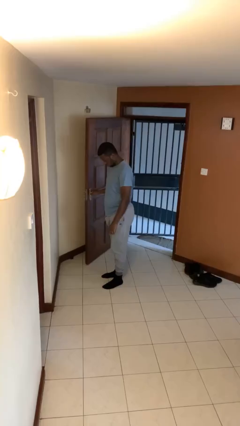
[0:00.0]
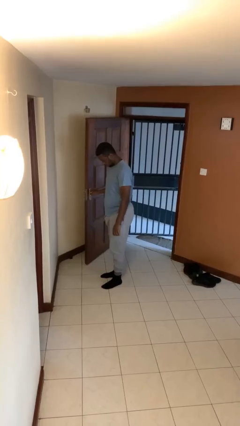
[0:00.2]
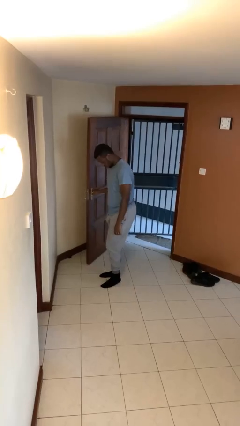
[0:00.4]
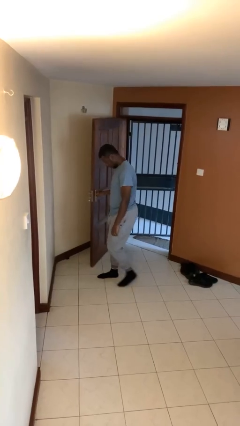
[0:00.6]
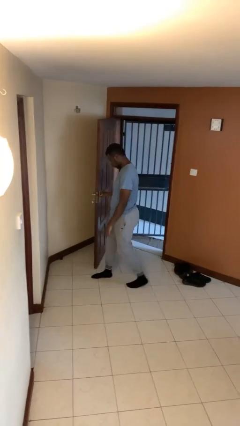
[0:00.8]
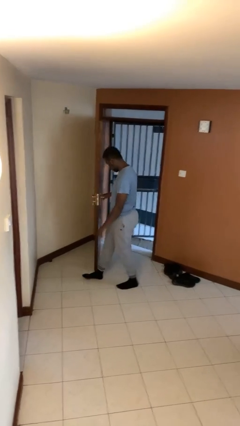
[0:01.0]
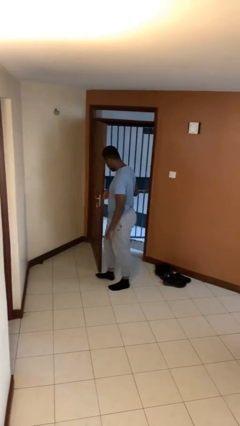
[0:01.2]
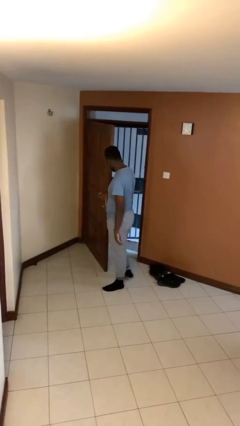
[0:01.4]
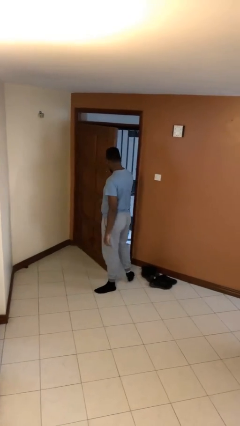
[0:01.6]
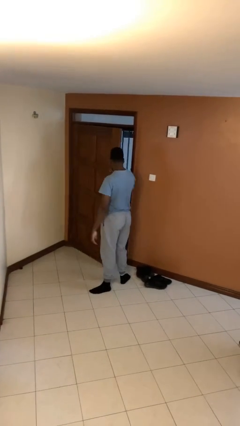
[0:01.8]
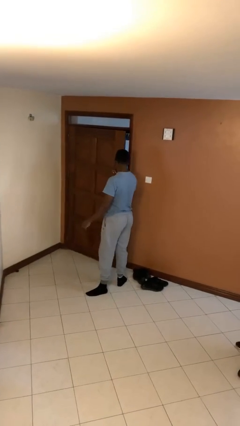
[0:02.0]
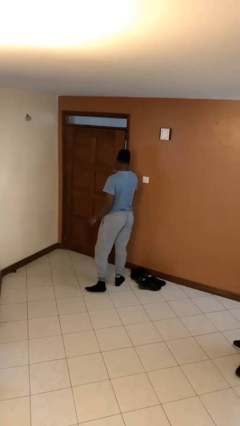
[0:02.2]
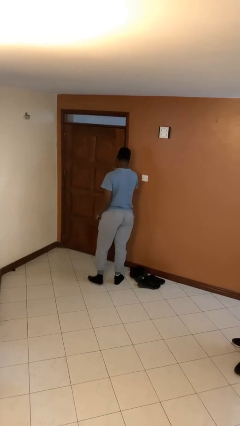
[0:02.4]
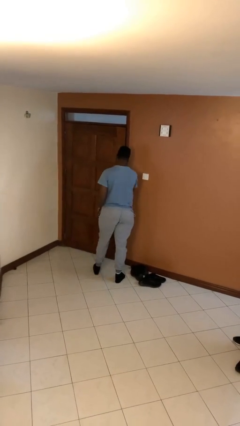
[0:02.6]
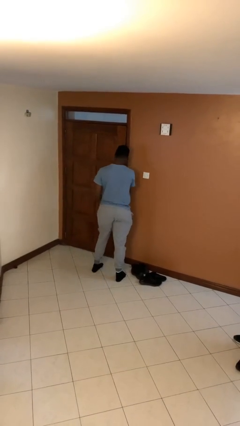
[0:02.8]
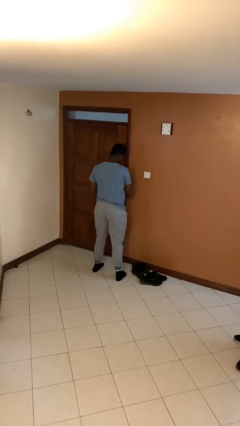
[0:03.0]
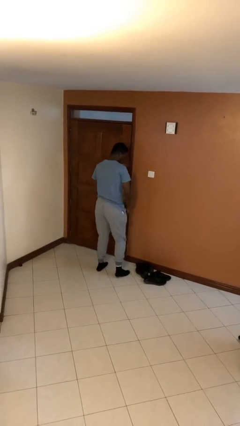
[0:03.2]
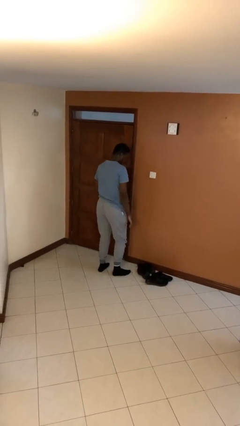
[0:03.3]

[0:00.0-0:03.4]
person closes facility door

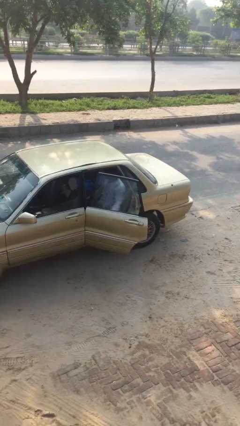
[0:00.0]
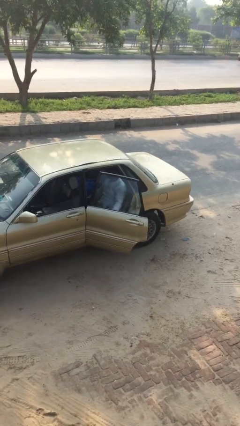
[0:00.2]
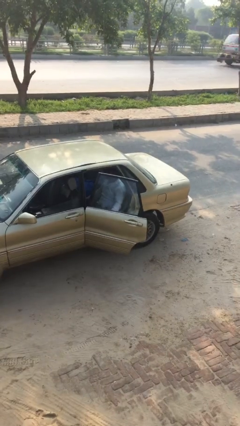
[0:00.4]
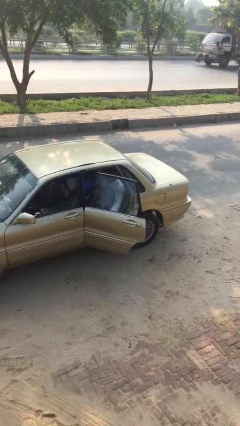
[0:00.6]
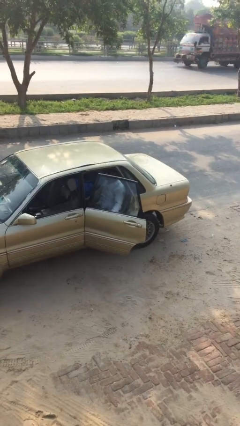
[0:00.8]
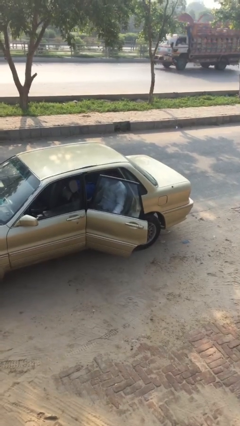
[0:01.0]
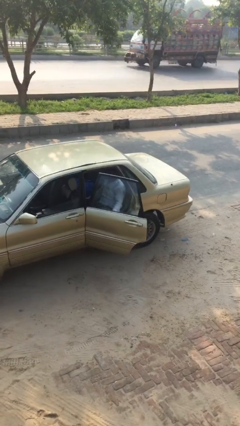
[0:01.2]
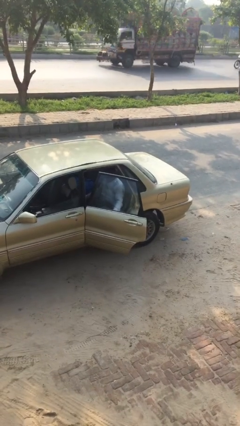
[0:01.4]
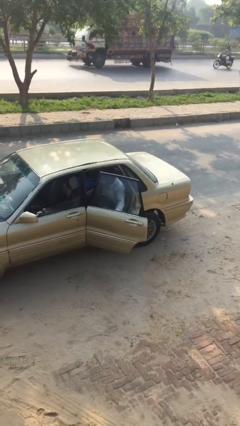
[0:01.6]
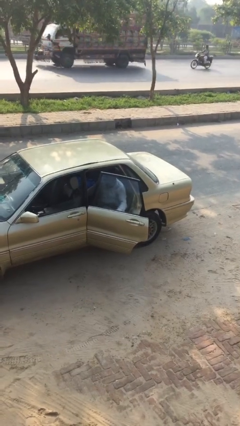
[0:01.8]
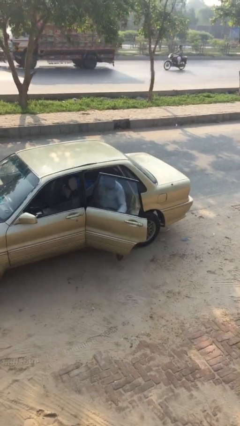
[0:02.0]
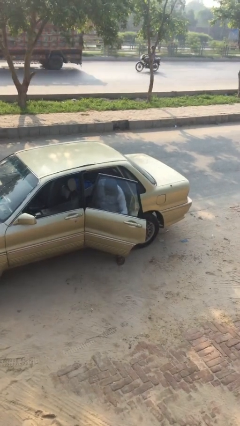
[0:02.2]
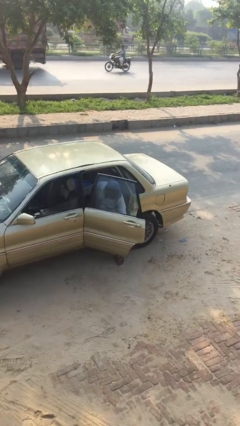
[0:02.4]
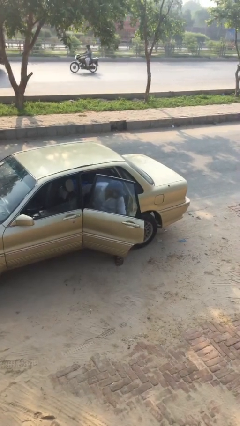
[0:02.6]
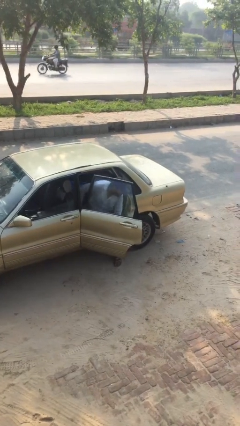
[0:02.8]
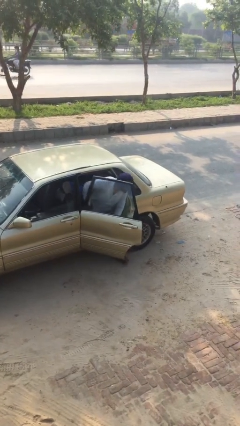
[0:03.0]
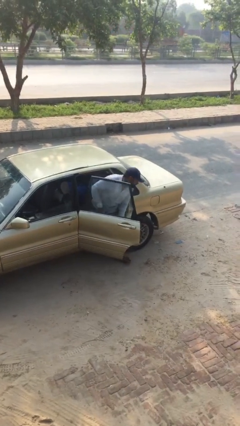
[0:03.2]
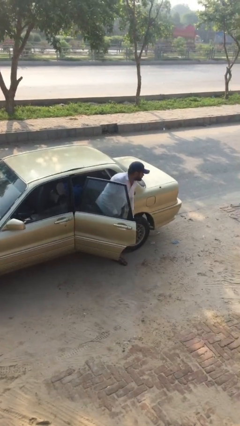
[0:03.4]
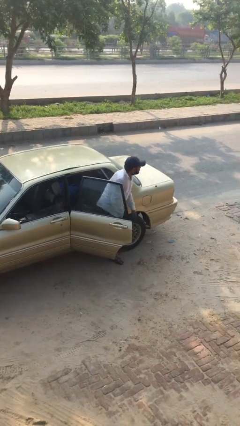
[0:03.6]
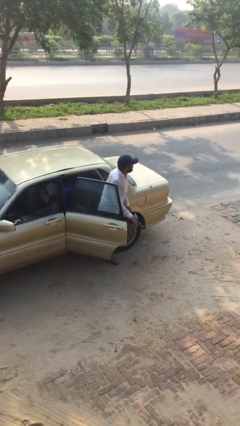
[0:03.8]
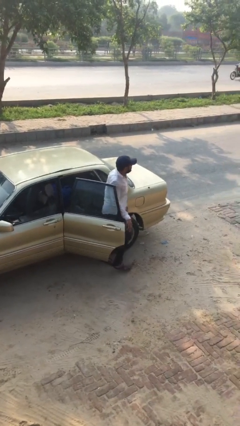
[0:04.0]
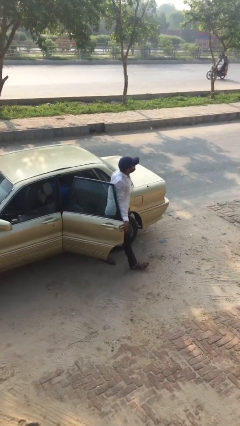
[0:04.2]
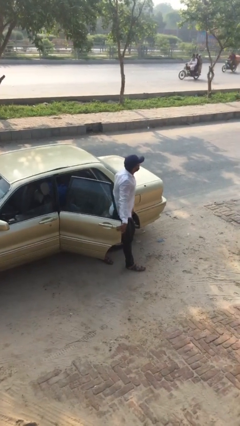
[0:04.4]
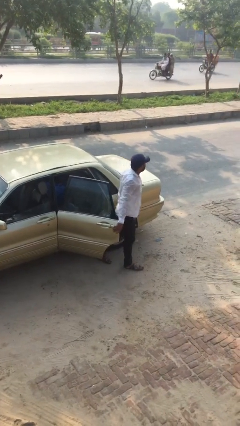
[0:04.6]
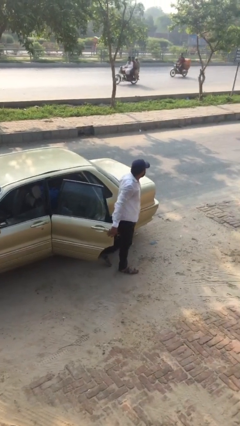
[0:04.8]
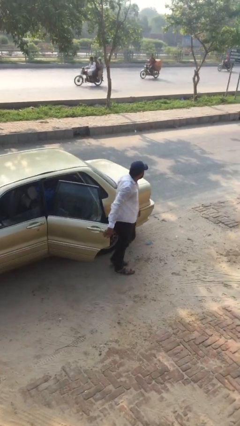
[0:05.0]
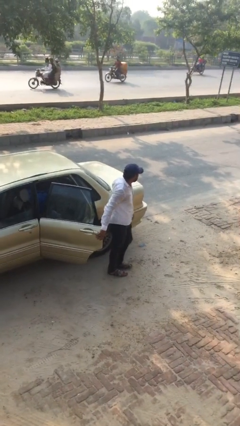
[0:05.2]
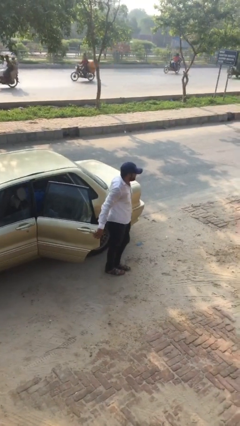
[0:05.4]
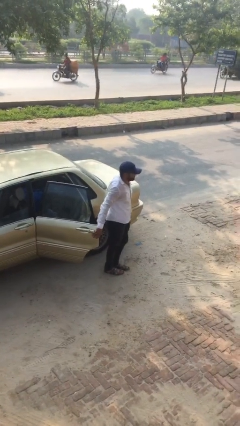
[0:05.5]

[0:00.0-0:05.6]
person exits car

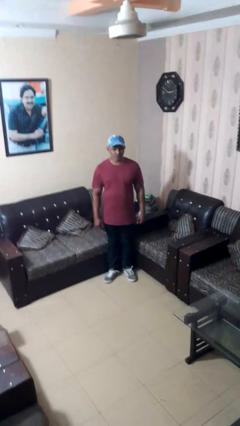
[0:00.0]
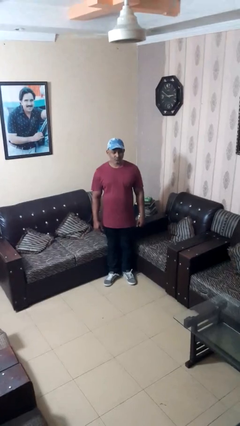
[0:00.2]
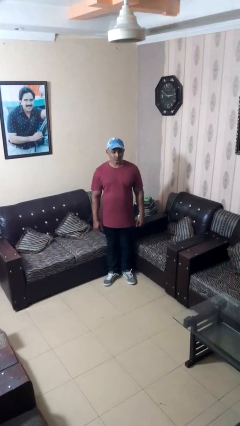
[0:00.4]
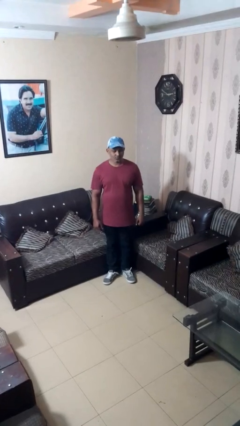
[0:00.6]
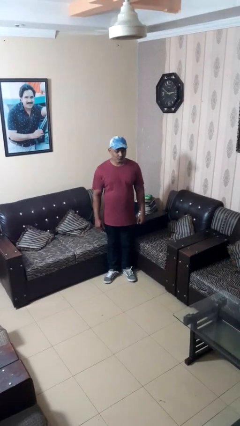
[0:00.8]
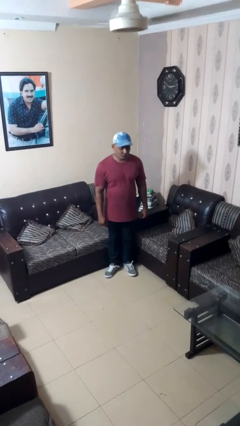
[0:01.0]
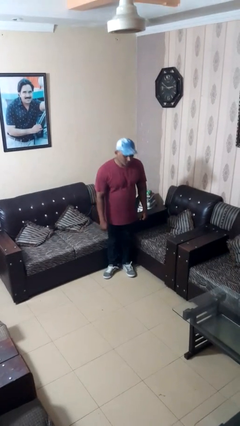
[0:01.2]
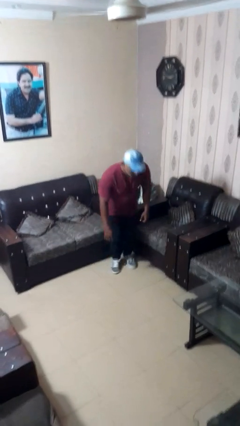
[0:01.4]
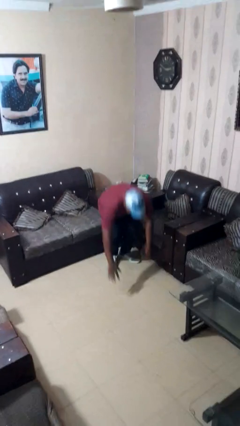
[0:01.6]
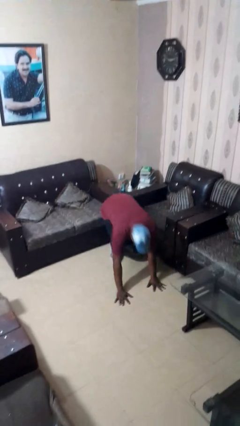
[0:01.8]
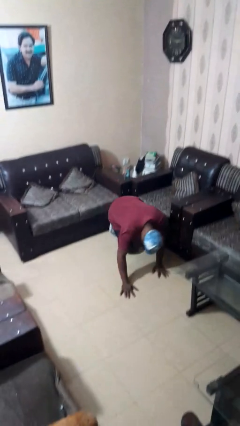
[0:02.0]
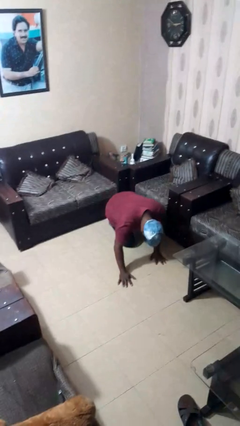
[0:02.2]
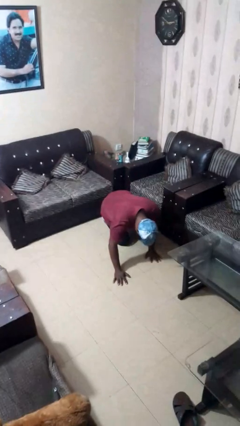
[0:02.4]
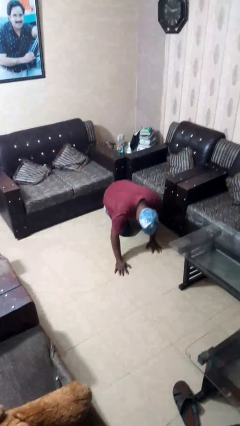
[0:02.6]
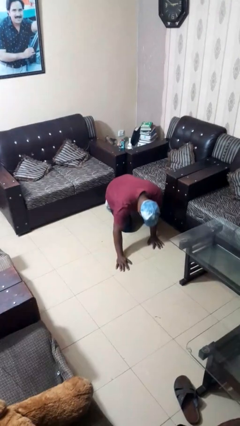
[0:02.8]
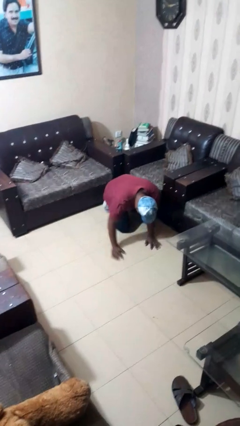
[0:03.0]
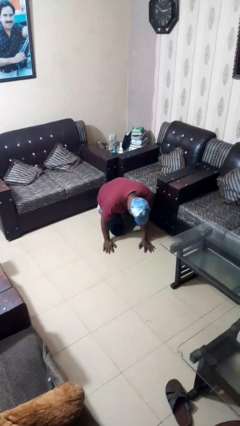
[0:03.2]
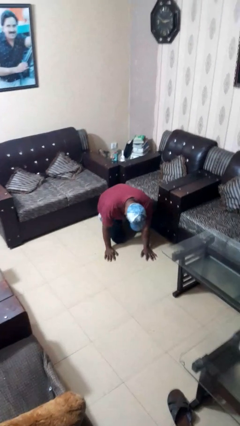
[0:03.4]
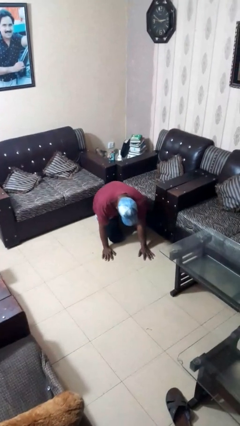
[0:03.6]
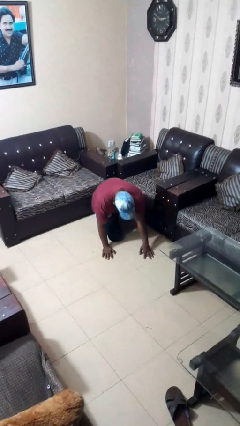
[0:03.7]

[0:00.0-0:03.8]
person falls while standing

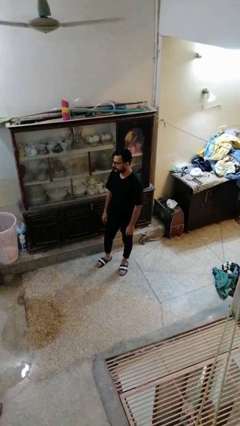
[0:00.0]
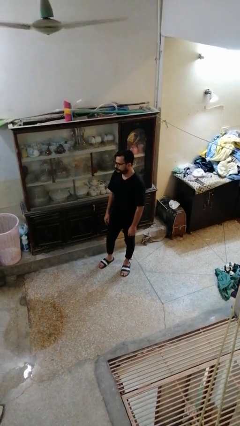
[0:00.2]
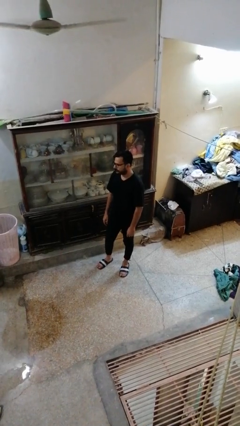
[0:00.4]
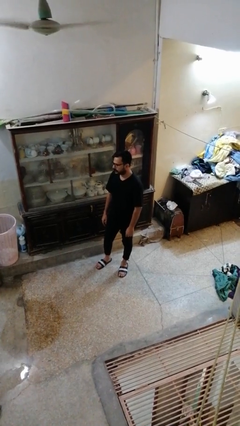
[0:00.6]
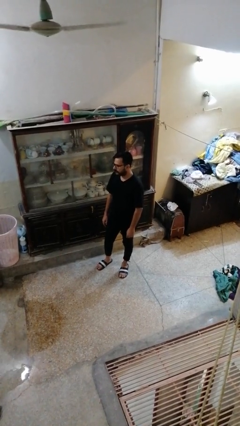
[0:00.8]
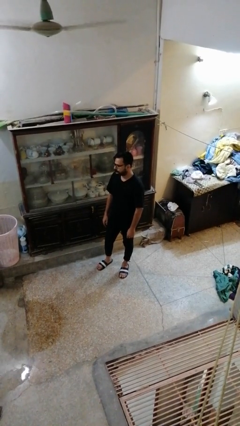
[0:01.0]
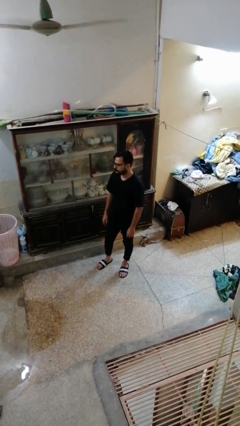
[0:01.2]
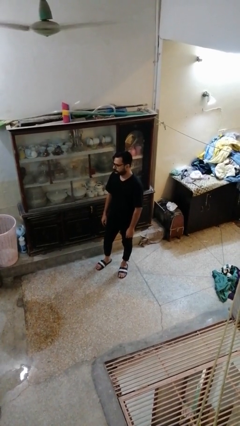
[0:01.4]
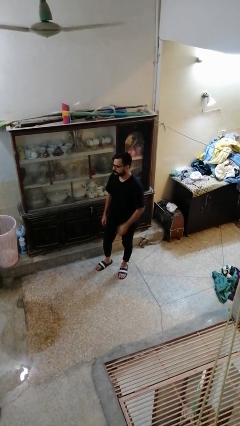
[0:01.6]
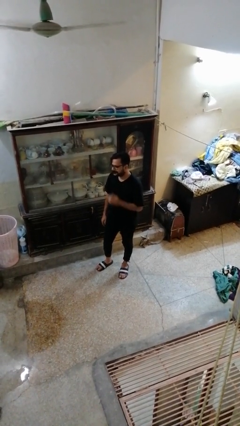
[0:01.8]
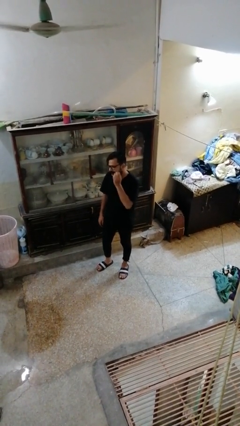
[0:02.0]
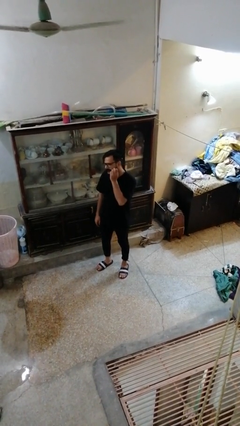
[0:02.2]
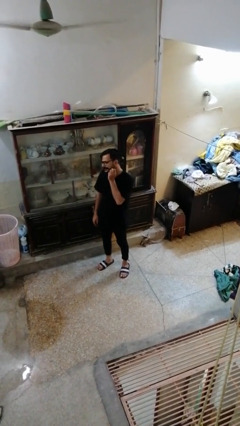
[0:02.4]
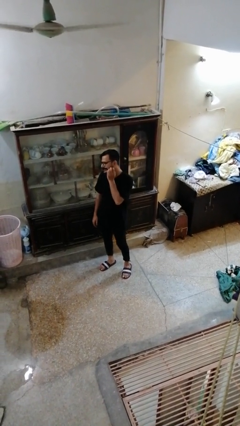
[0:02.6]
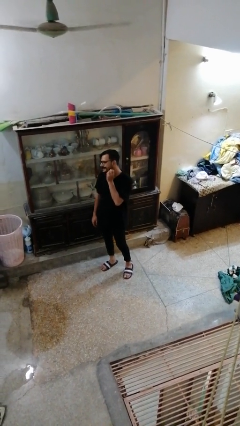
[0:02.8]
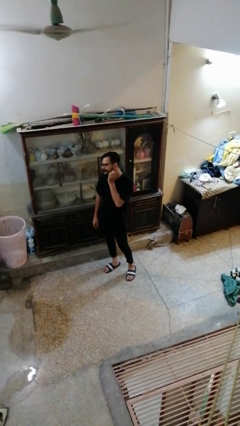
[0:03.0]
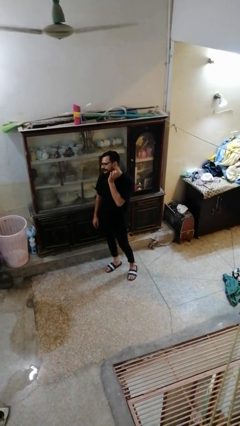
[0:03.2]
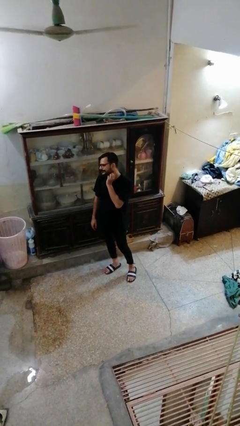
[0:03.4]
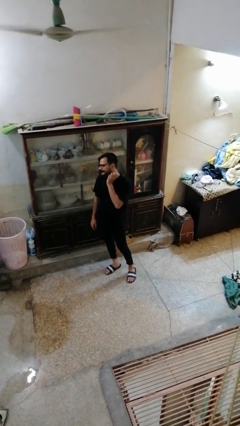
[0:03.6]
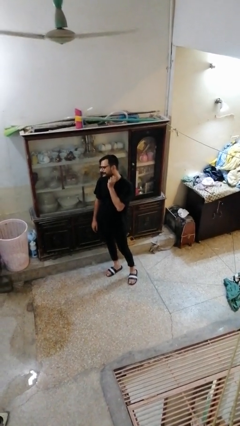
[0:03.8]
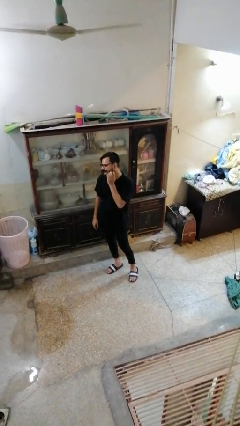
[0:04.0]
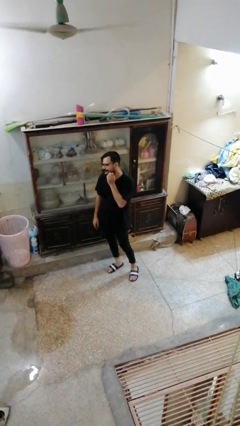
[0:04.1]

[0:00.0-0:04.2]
person scratches face

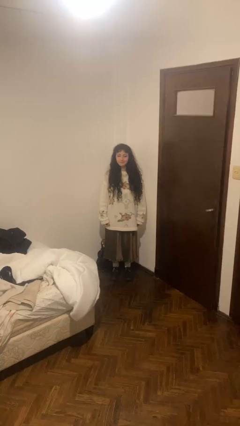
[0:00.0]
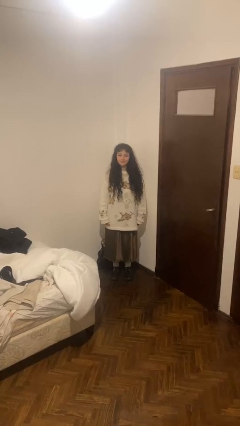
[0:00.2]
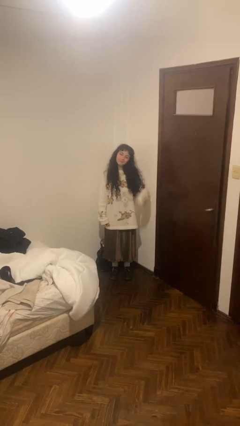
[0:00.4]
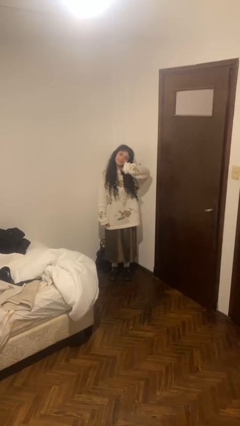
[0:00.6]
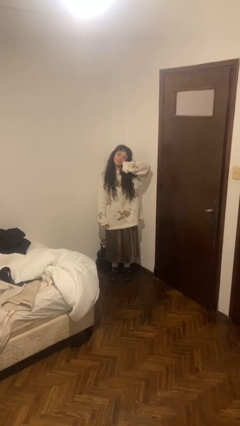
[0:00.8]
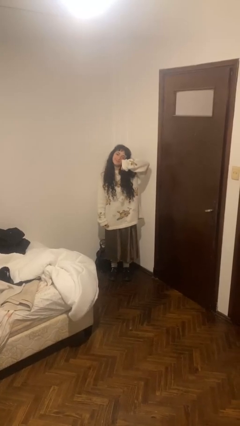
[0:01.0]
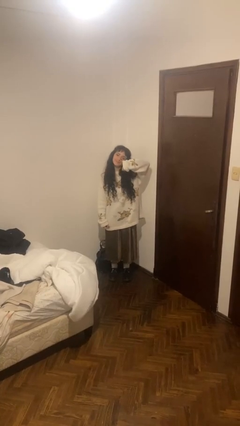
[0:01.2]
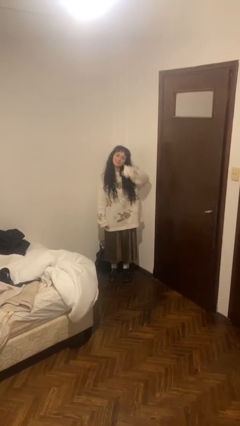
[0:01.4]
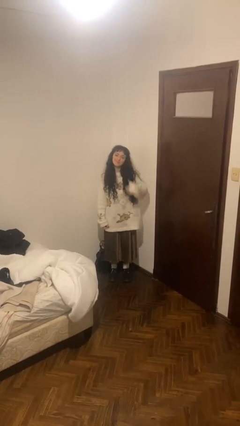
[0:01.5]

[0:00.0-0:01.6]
person gestures thumbs up
